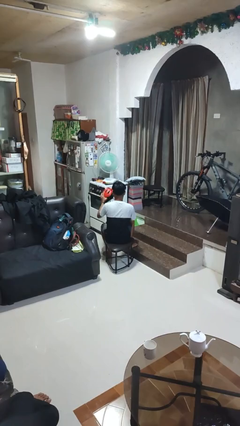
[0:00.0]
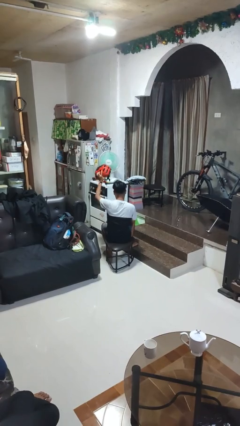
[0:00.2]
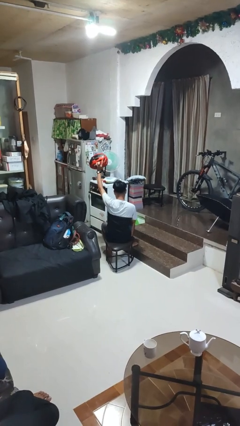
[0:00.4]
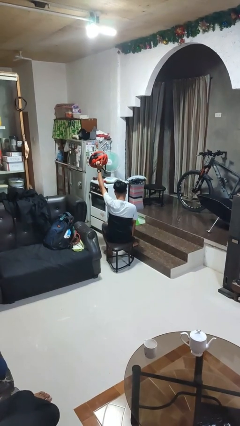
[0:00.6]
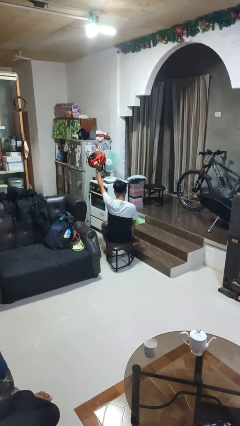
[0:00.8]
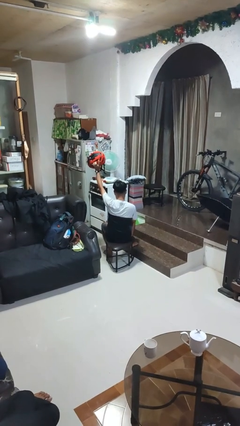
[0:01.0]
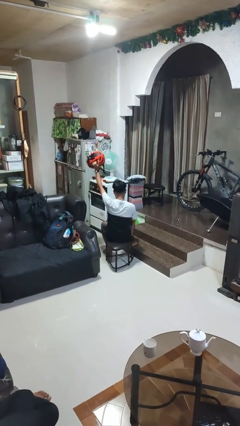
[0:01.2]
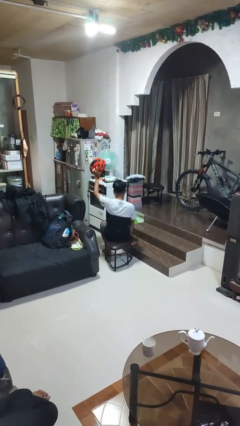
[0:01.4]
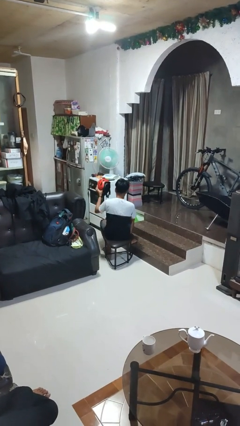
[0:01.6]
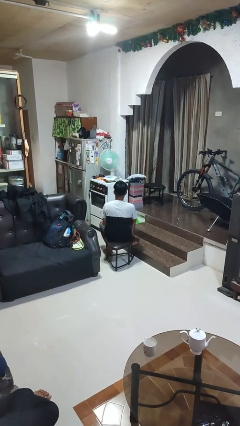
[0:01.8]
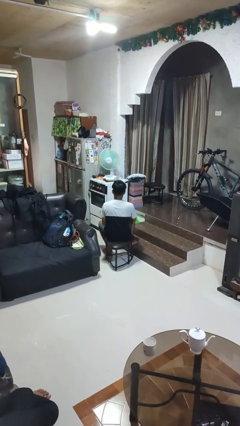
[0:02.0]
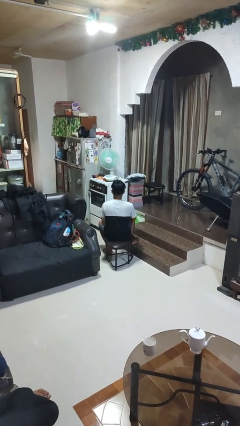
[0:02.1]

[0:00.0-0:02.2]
person holds object above head

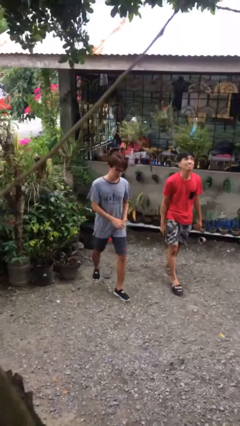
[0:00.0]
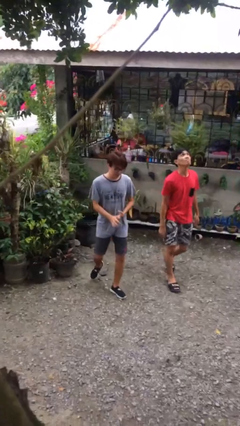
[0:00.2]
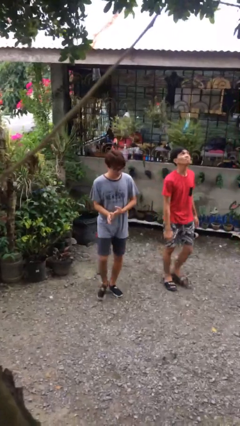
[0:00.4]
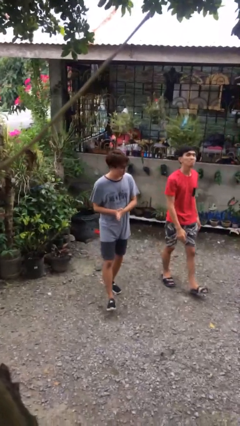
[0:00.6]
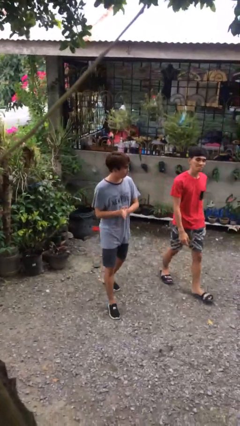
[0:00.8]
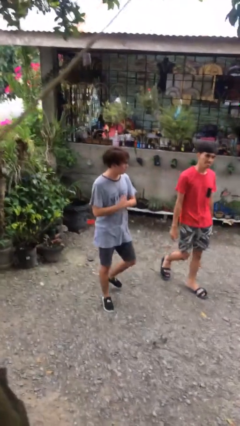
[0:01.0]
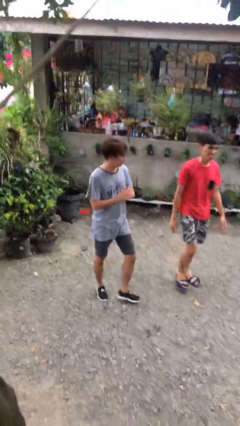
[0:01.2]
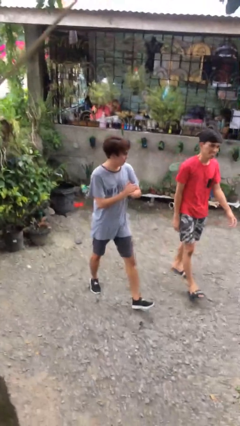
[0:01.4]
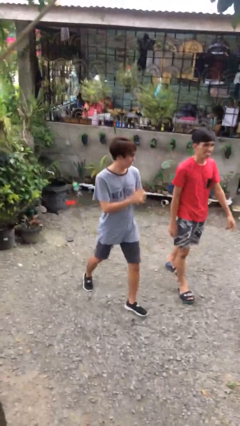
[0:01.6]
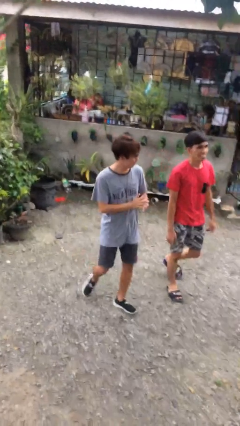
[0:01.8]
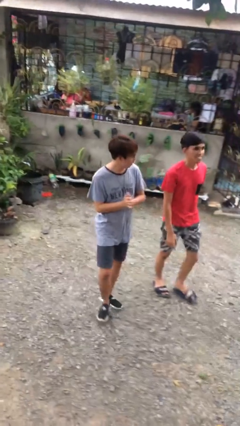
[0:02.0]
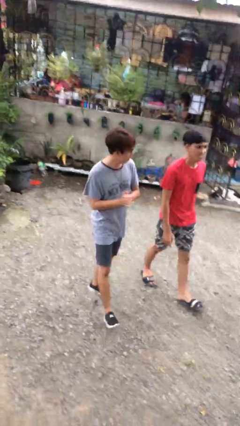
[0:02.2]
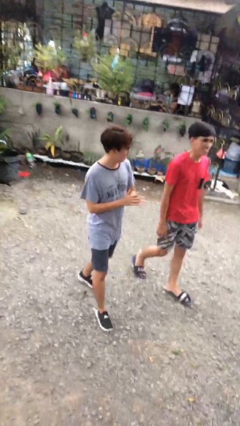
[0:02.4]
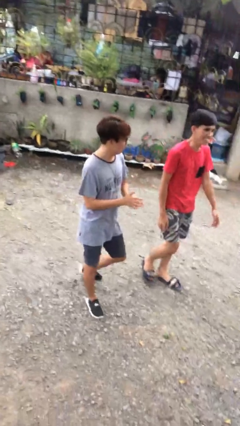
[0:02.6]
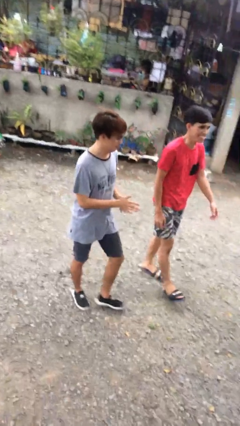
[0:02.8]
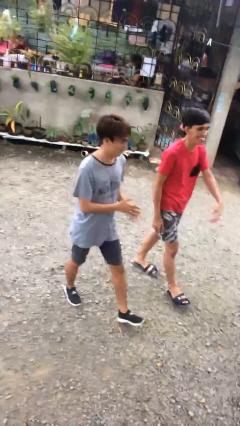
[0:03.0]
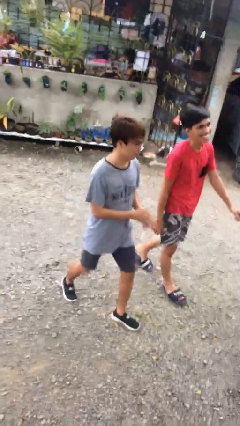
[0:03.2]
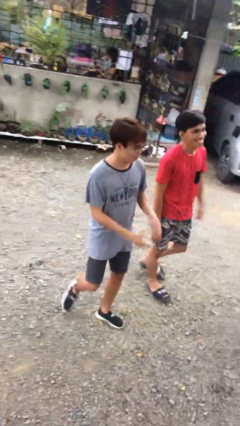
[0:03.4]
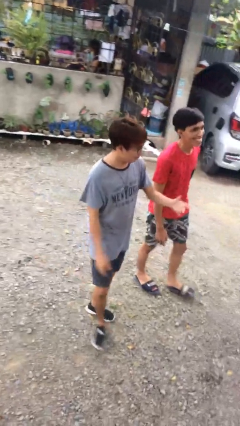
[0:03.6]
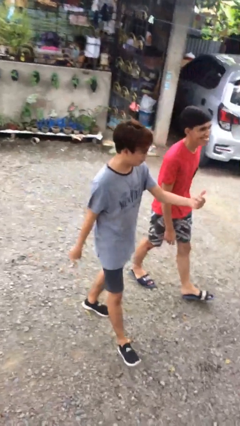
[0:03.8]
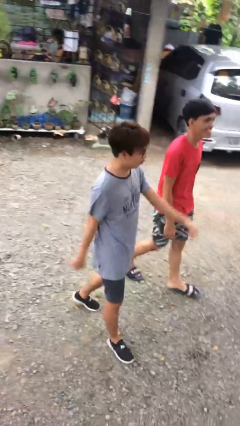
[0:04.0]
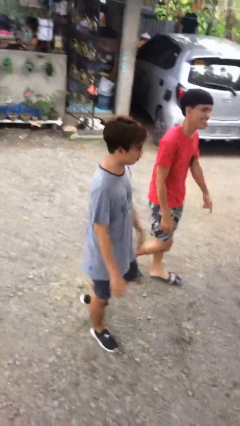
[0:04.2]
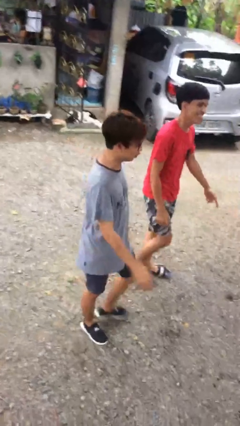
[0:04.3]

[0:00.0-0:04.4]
person talks to person

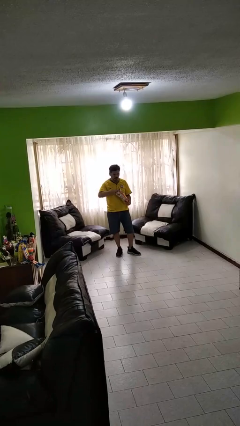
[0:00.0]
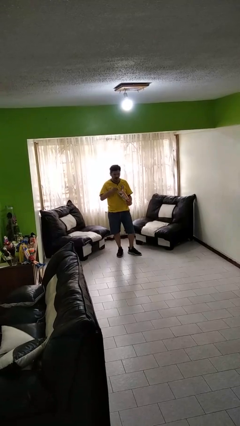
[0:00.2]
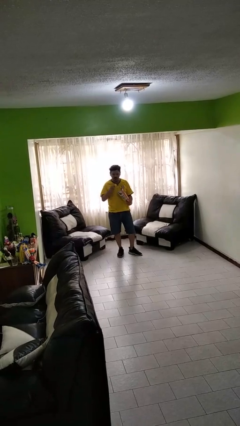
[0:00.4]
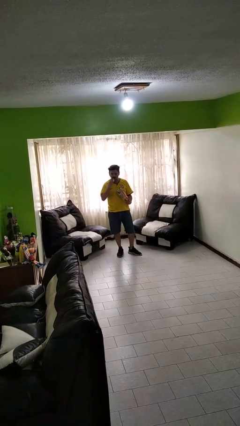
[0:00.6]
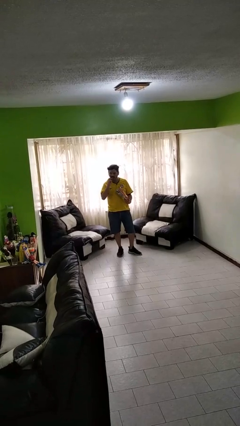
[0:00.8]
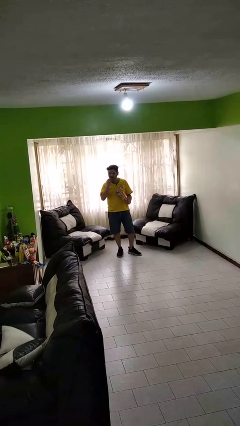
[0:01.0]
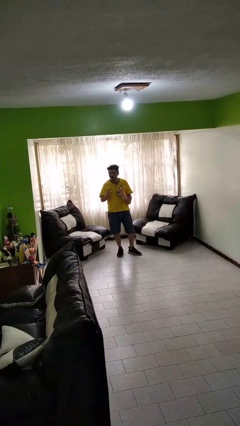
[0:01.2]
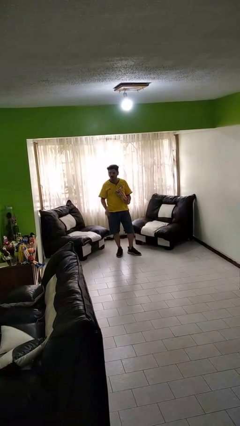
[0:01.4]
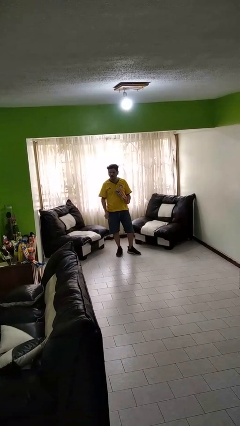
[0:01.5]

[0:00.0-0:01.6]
person eats snack from bag

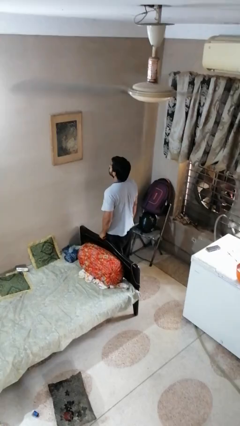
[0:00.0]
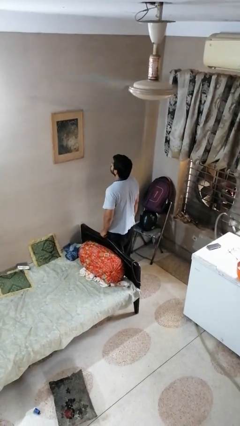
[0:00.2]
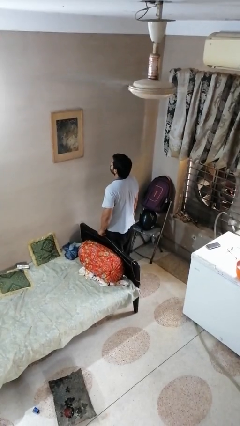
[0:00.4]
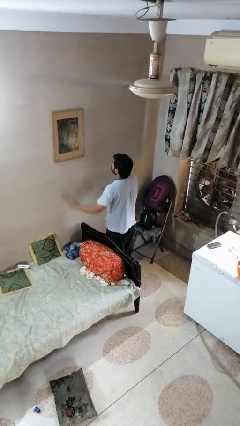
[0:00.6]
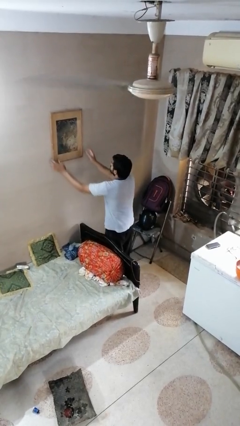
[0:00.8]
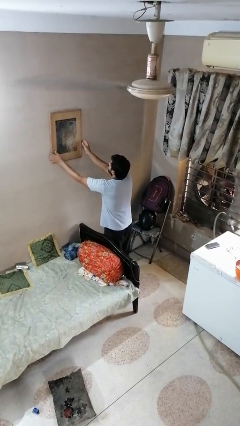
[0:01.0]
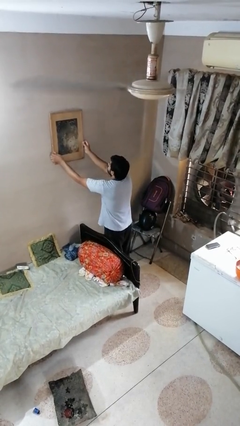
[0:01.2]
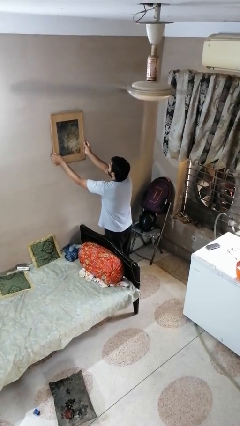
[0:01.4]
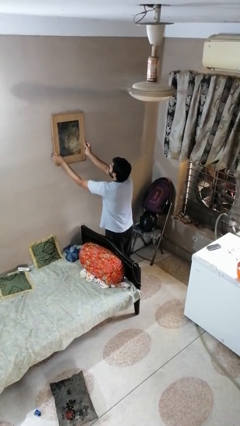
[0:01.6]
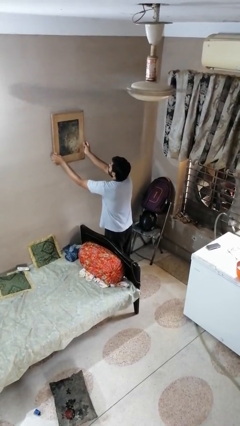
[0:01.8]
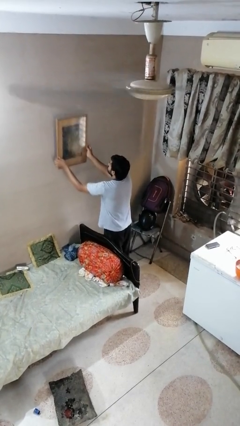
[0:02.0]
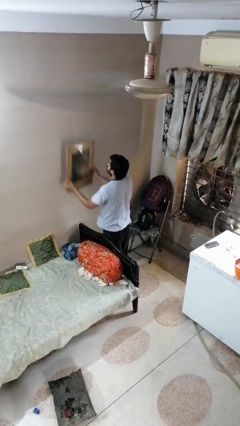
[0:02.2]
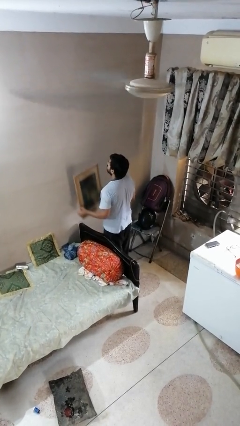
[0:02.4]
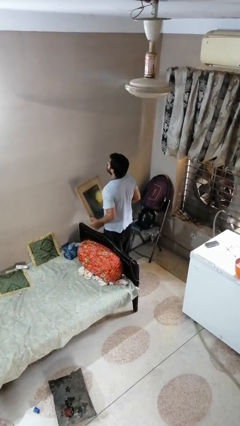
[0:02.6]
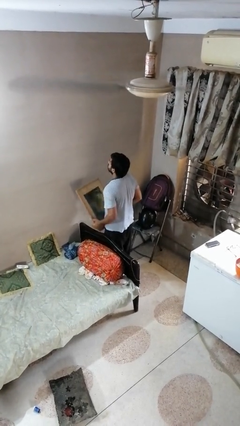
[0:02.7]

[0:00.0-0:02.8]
person takes down picture frame

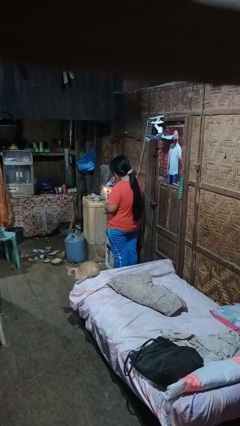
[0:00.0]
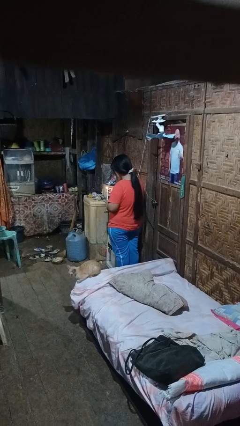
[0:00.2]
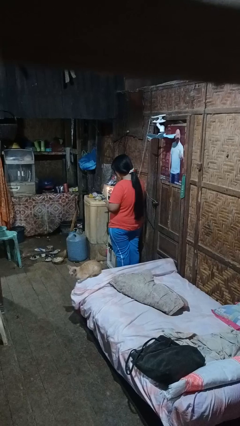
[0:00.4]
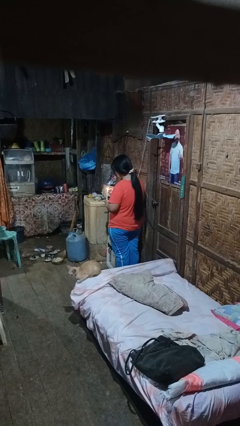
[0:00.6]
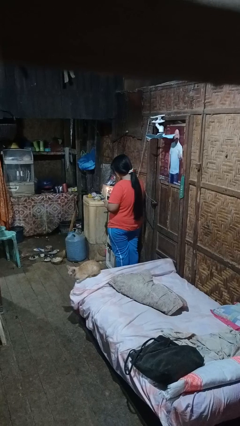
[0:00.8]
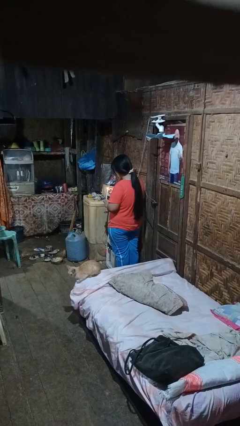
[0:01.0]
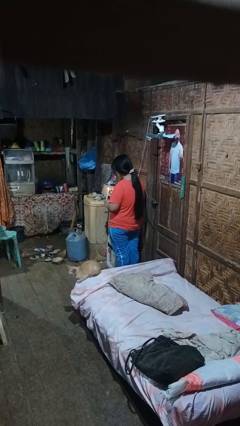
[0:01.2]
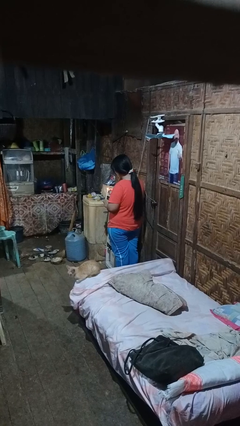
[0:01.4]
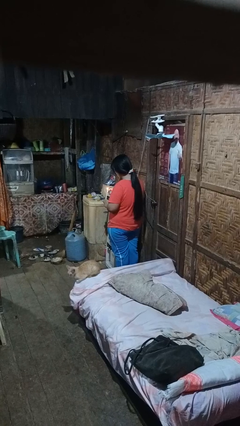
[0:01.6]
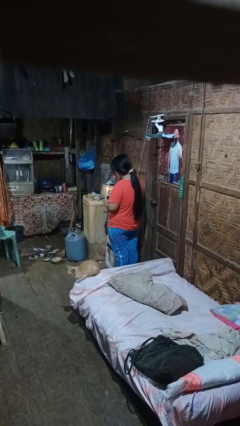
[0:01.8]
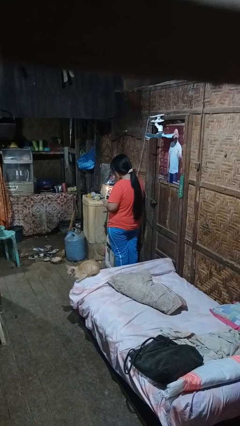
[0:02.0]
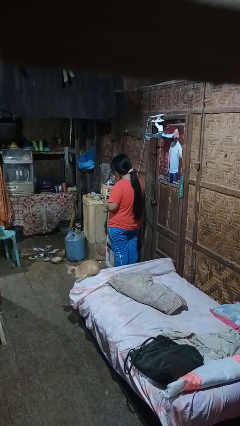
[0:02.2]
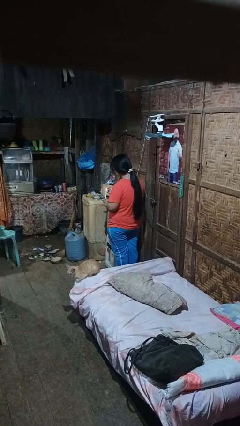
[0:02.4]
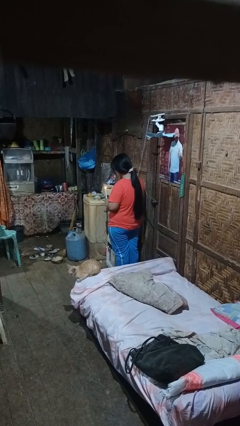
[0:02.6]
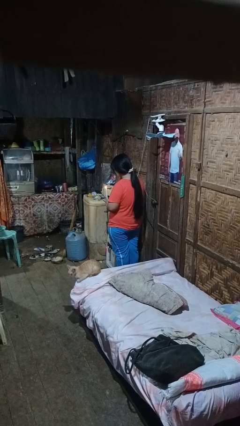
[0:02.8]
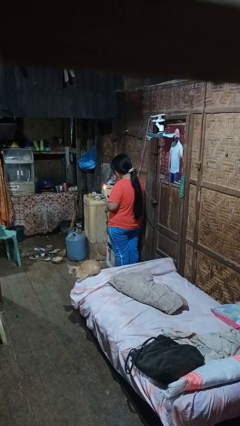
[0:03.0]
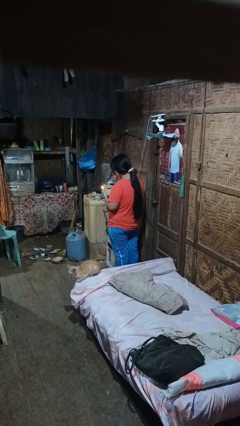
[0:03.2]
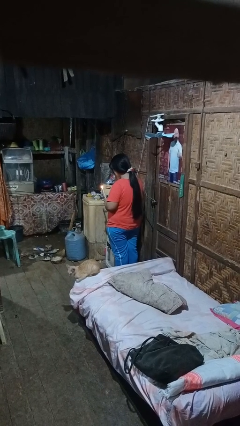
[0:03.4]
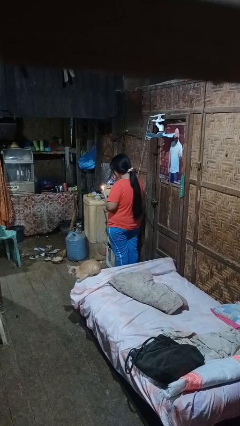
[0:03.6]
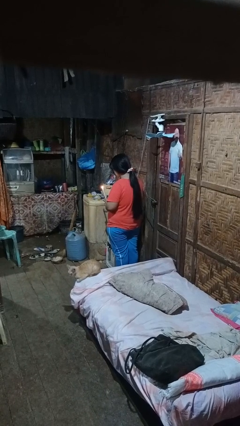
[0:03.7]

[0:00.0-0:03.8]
person lights candle

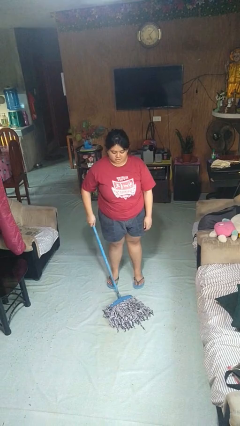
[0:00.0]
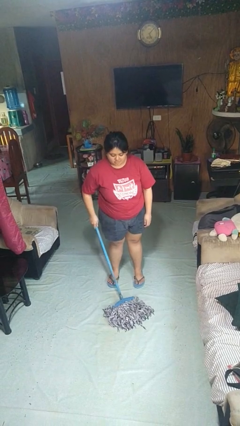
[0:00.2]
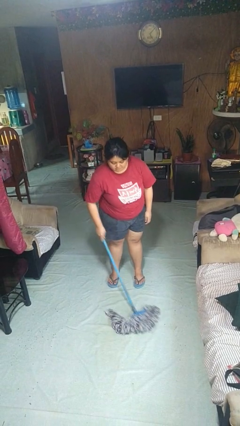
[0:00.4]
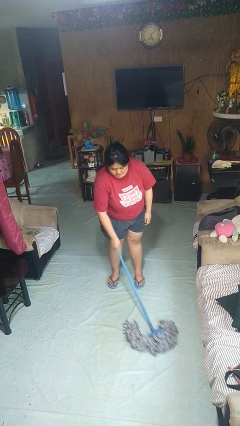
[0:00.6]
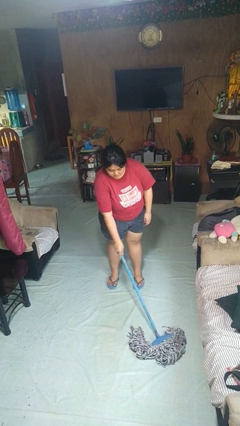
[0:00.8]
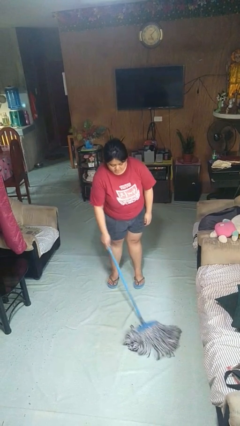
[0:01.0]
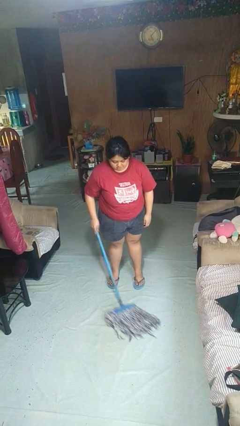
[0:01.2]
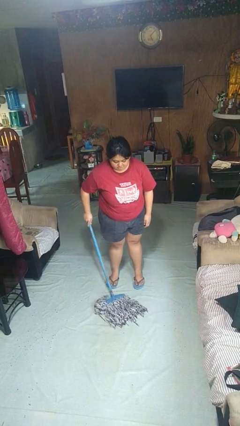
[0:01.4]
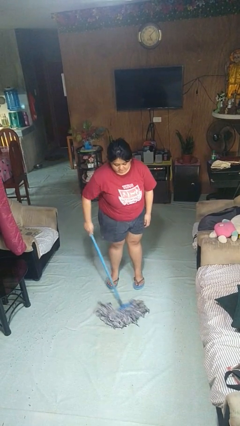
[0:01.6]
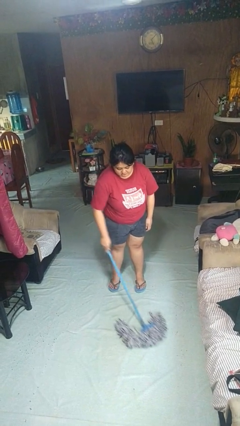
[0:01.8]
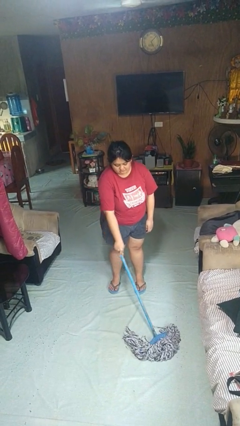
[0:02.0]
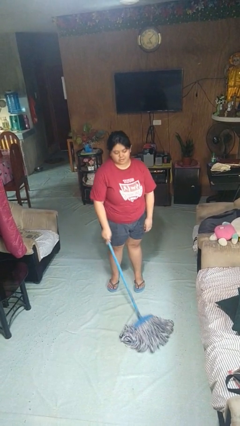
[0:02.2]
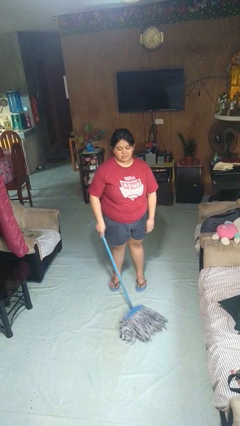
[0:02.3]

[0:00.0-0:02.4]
person mops

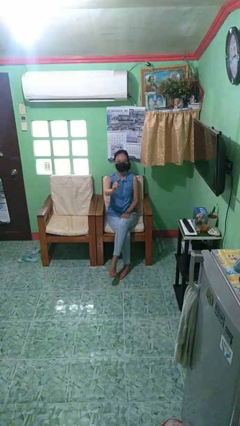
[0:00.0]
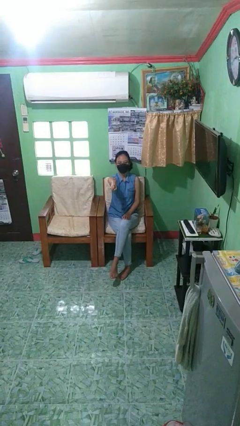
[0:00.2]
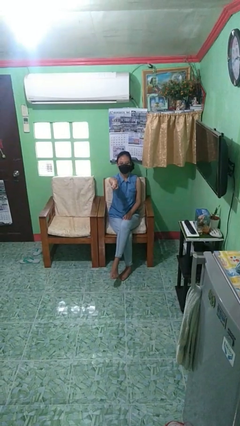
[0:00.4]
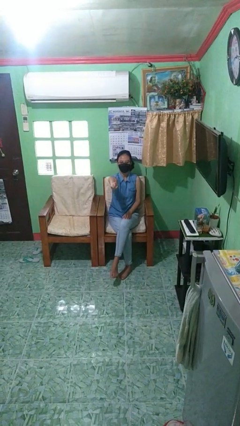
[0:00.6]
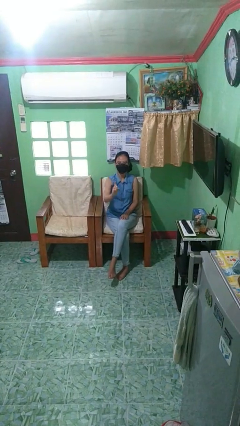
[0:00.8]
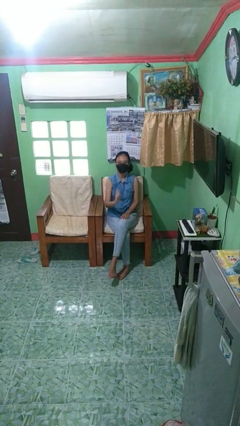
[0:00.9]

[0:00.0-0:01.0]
person gestures number one
